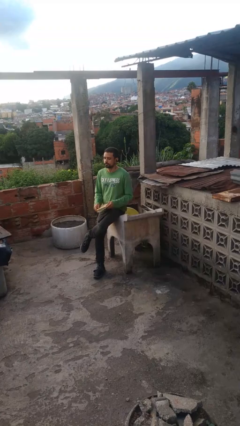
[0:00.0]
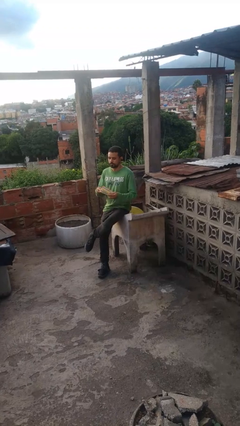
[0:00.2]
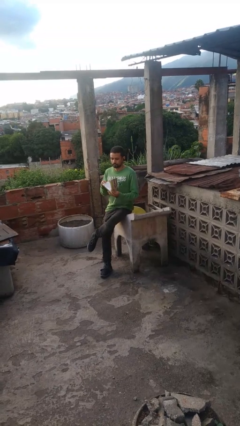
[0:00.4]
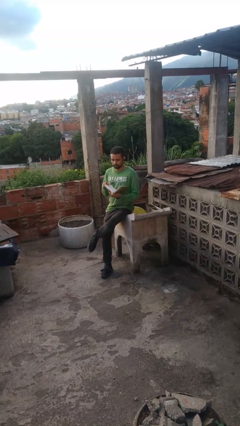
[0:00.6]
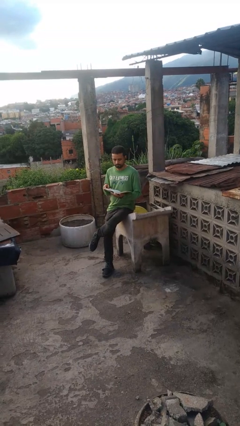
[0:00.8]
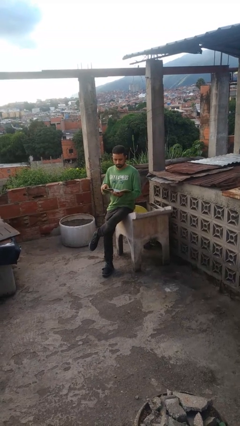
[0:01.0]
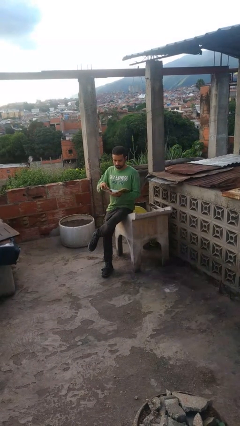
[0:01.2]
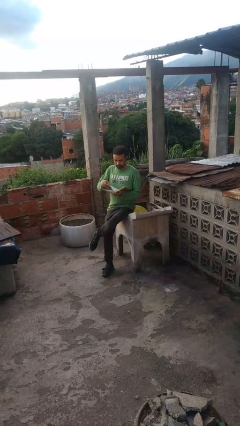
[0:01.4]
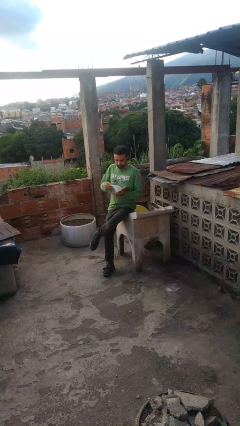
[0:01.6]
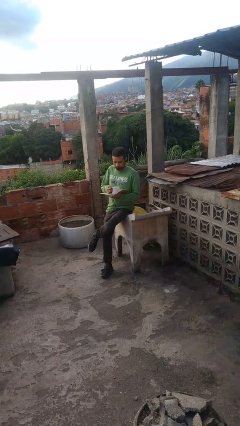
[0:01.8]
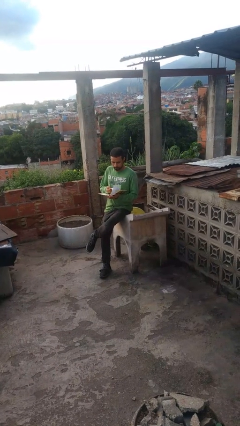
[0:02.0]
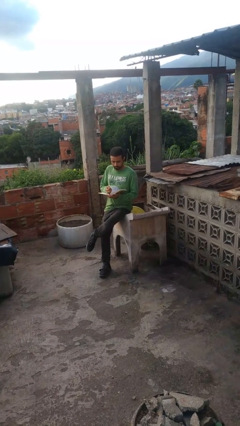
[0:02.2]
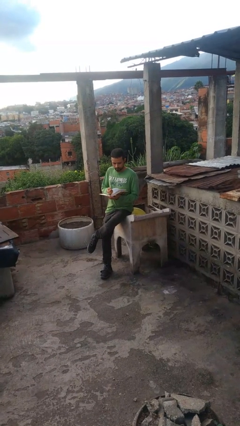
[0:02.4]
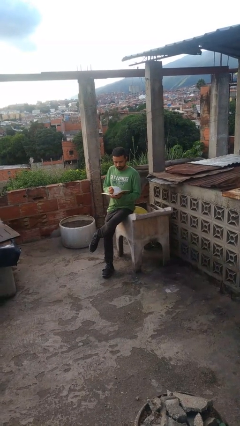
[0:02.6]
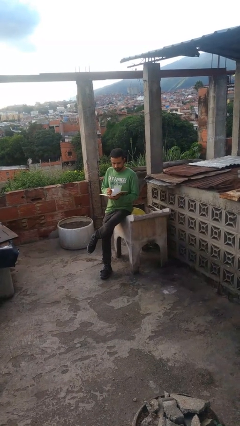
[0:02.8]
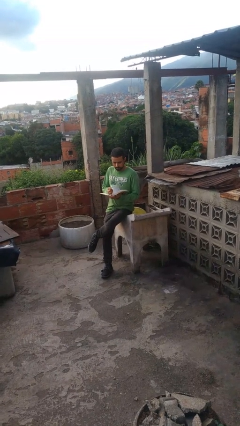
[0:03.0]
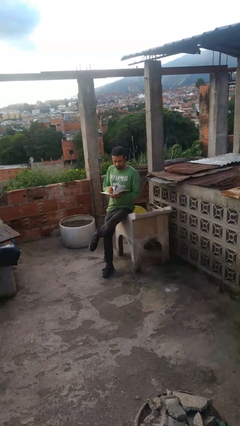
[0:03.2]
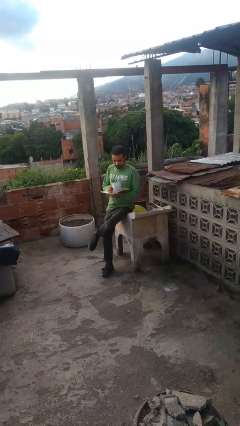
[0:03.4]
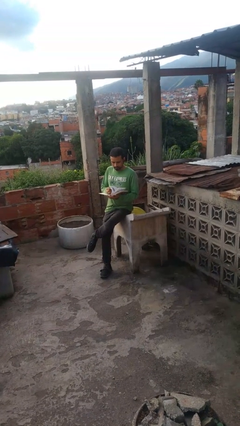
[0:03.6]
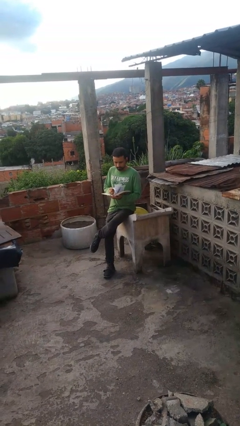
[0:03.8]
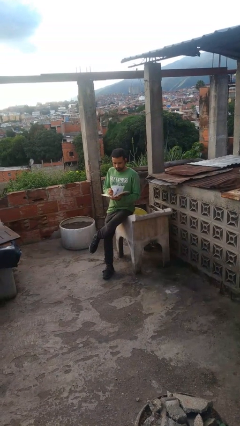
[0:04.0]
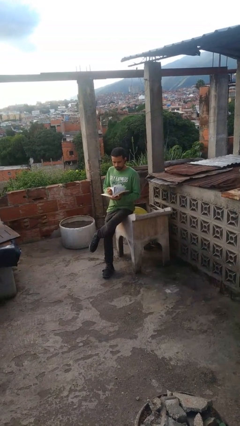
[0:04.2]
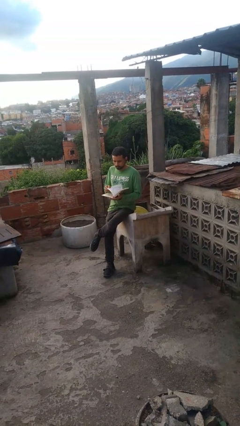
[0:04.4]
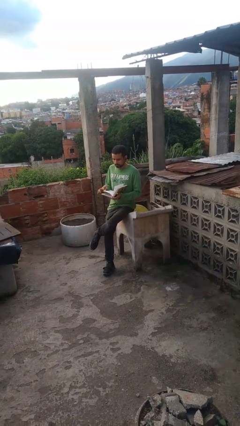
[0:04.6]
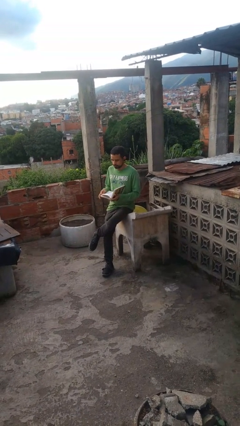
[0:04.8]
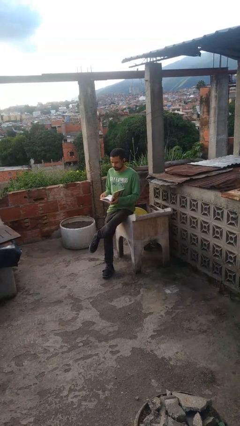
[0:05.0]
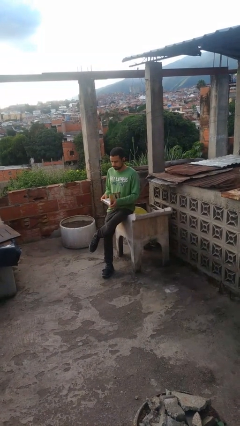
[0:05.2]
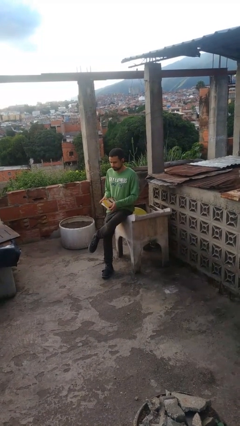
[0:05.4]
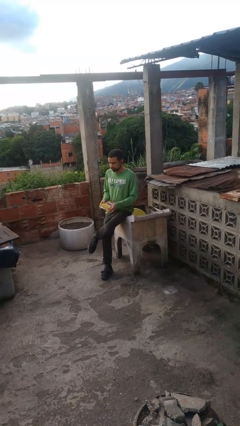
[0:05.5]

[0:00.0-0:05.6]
person reads book

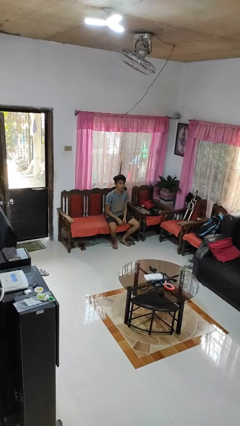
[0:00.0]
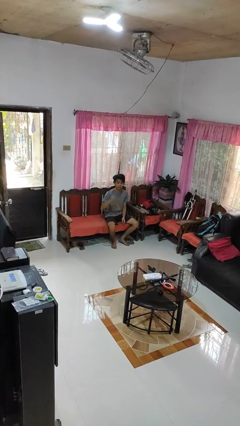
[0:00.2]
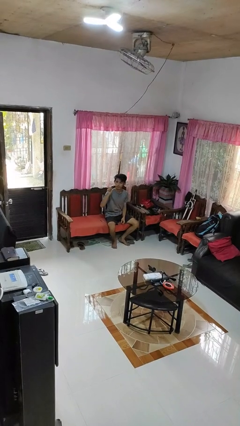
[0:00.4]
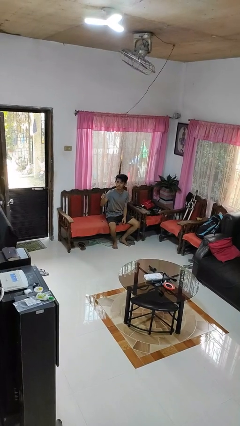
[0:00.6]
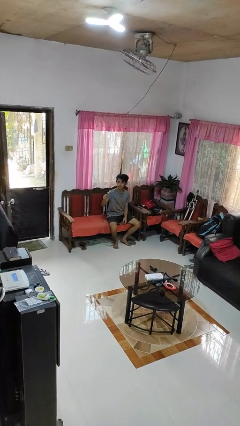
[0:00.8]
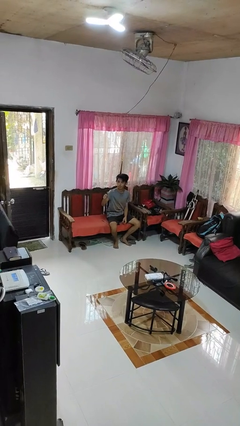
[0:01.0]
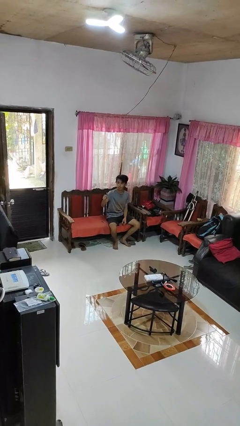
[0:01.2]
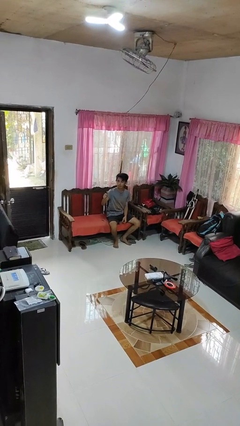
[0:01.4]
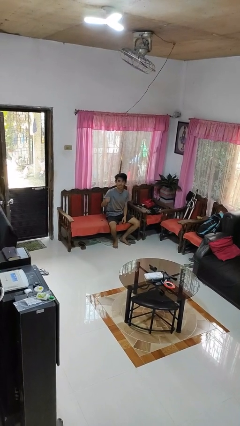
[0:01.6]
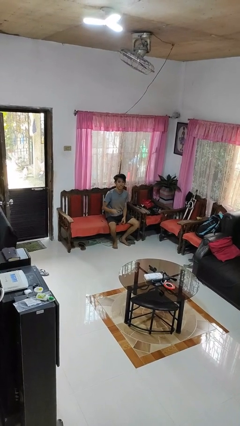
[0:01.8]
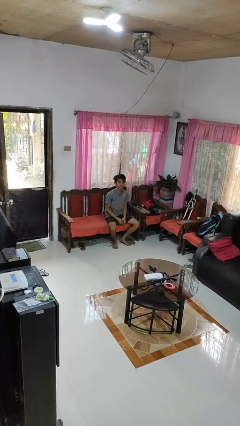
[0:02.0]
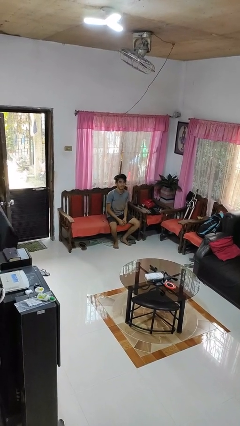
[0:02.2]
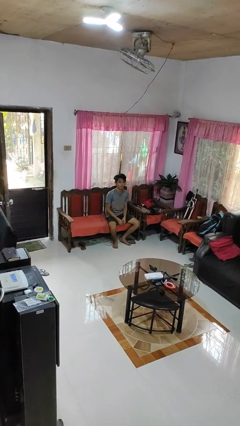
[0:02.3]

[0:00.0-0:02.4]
person gestures thumbs up

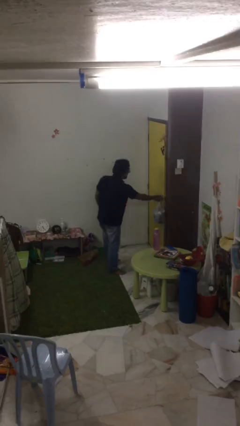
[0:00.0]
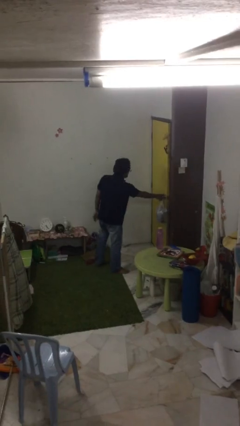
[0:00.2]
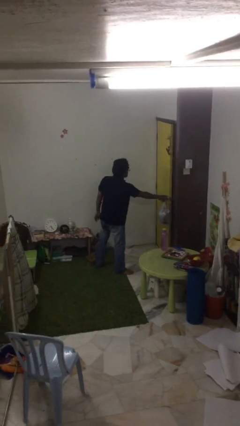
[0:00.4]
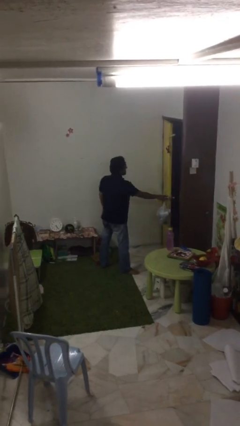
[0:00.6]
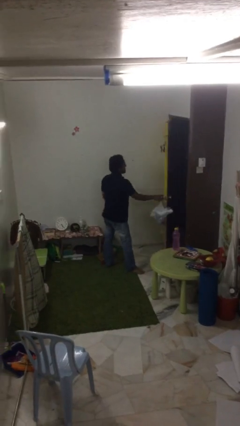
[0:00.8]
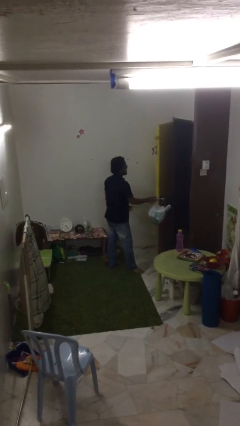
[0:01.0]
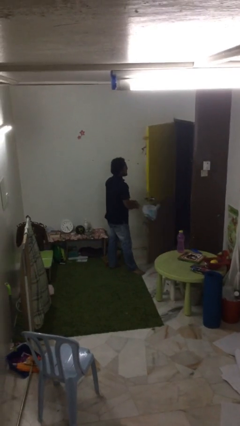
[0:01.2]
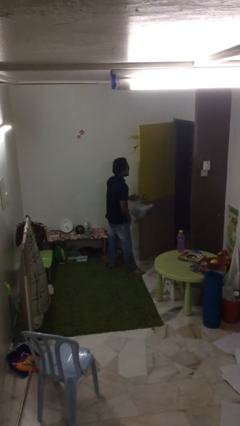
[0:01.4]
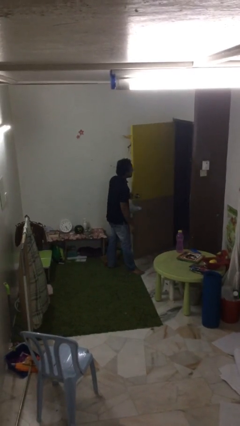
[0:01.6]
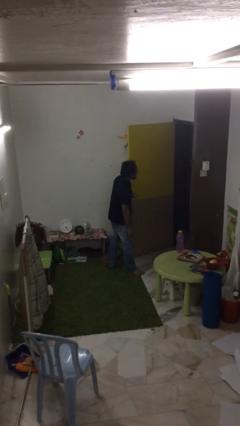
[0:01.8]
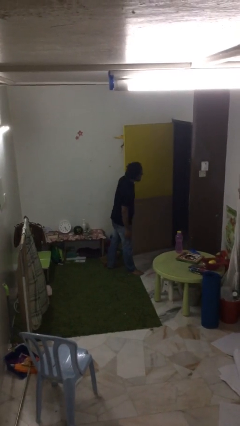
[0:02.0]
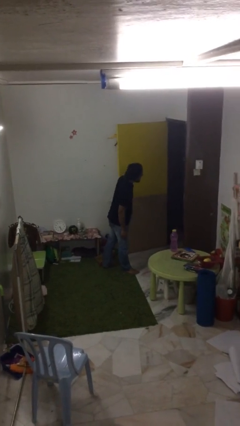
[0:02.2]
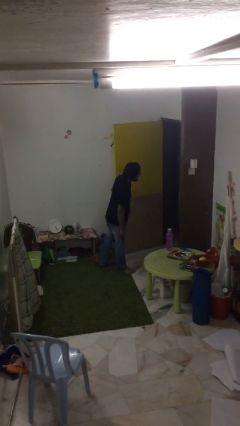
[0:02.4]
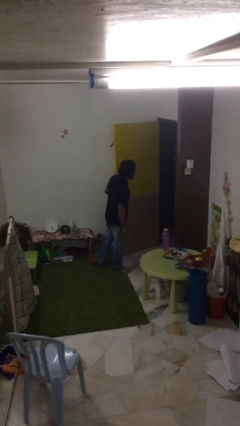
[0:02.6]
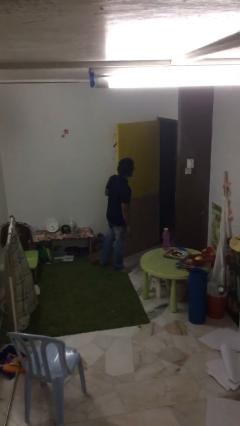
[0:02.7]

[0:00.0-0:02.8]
person opens facility door

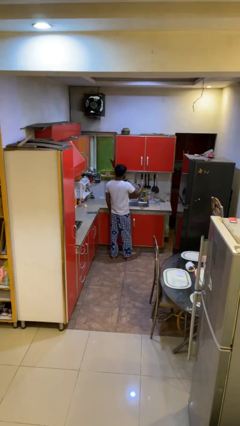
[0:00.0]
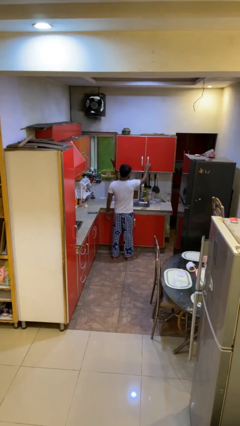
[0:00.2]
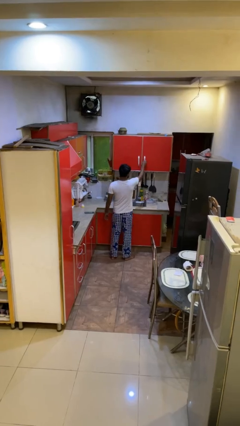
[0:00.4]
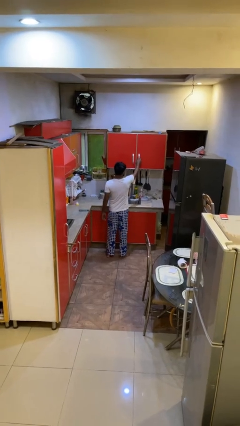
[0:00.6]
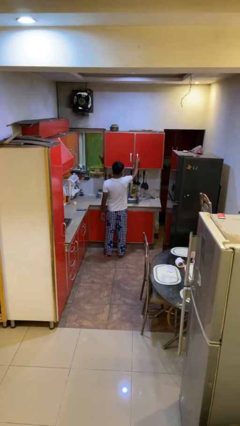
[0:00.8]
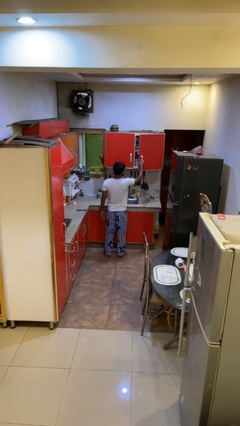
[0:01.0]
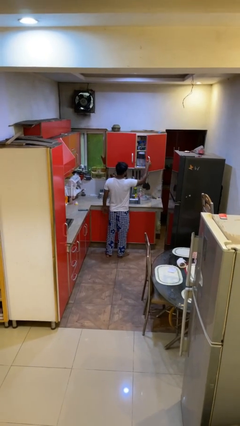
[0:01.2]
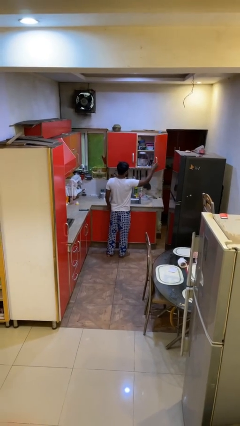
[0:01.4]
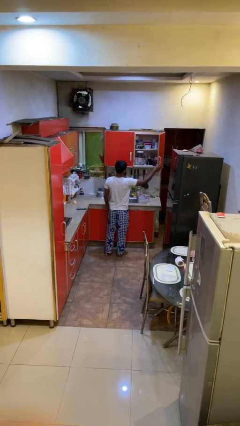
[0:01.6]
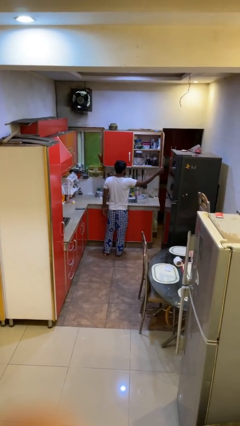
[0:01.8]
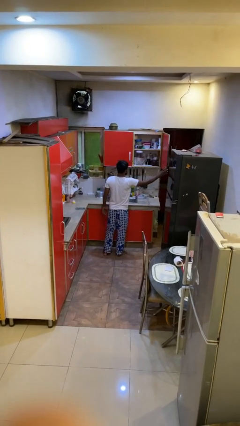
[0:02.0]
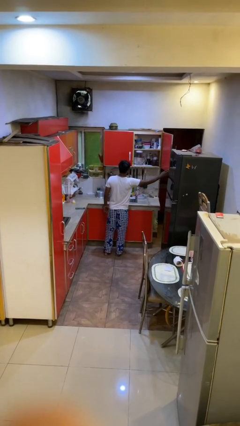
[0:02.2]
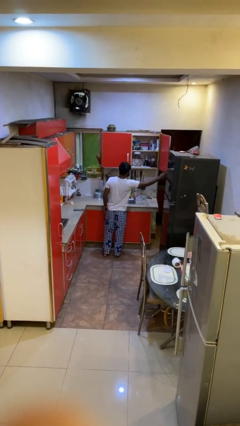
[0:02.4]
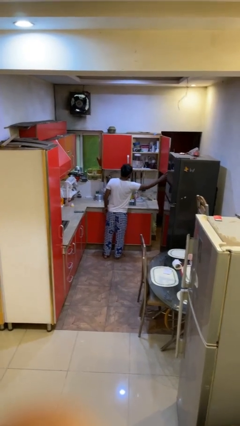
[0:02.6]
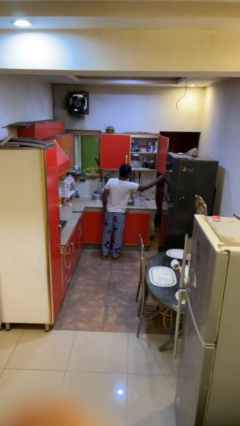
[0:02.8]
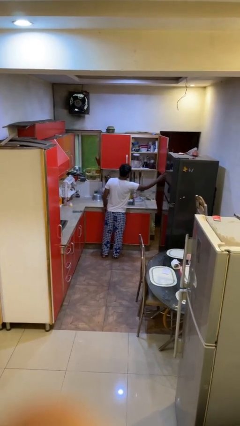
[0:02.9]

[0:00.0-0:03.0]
person opens cabinet

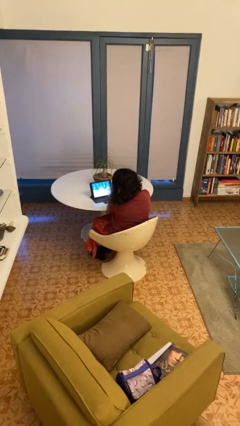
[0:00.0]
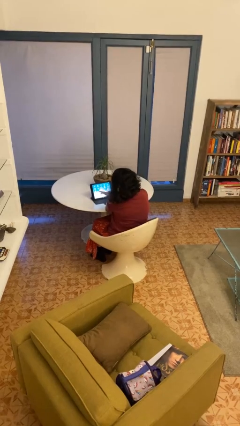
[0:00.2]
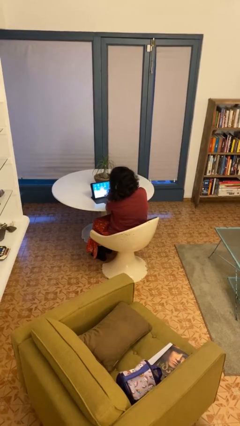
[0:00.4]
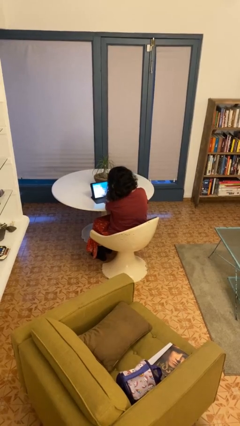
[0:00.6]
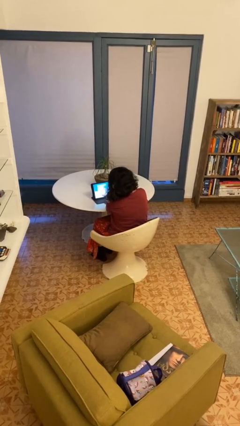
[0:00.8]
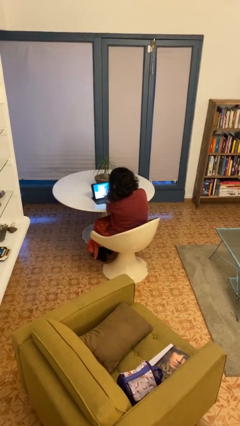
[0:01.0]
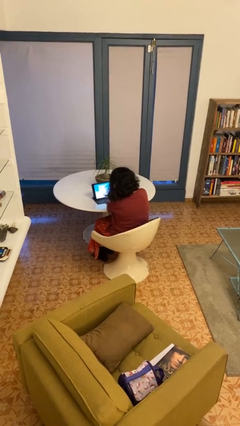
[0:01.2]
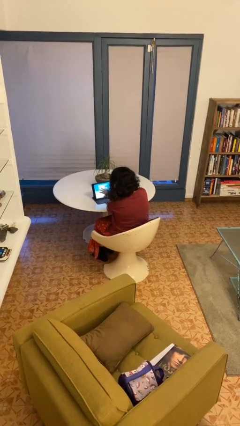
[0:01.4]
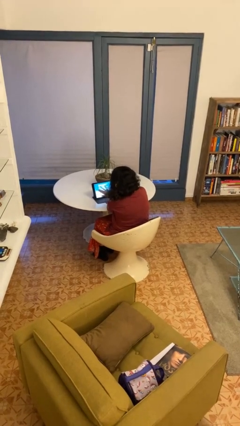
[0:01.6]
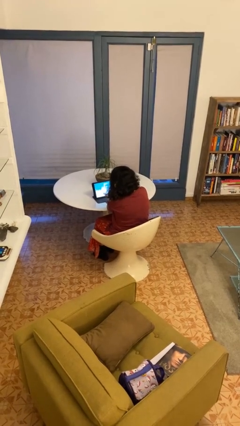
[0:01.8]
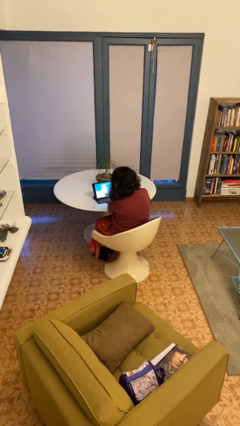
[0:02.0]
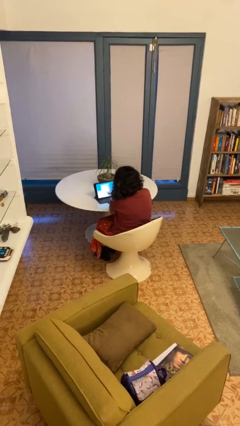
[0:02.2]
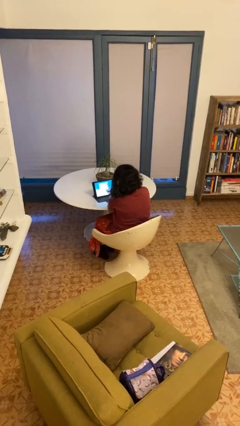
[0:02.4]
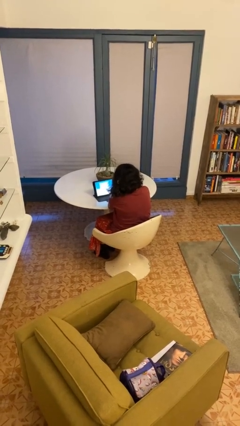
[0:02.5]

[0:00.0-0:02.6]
person interacts with tablet

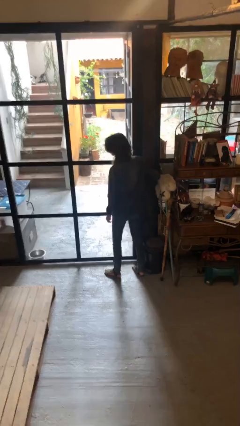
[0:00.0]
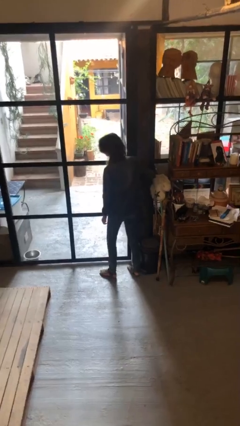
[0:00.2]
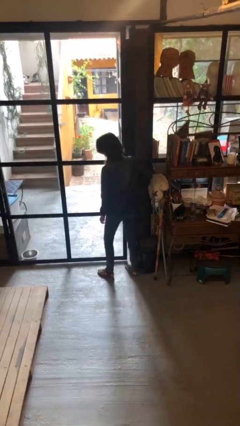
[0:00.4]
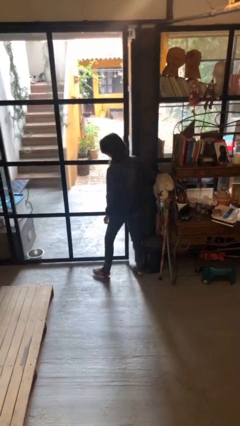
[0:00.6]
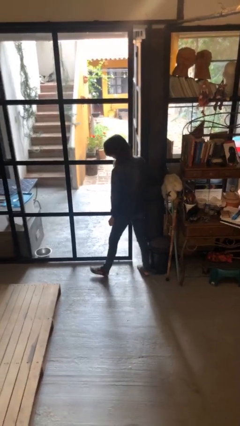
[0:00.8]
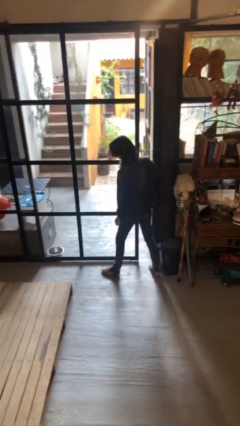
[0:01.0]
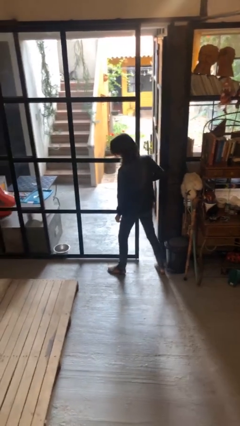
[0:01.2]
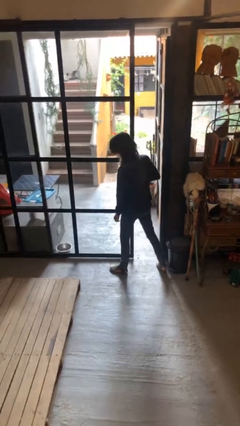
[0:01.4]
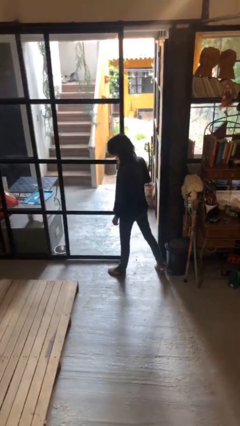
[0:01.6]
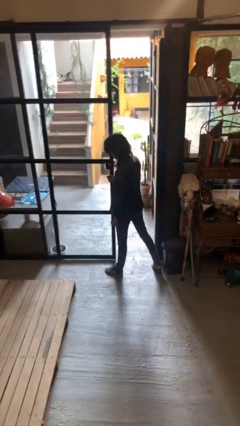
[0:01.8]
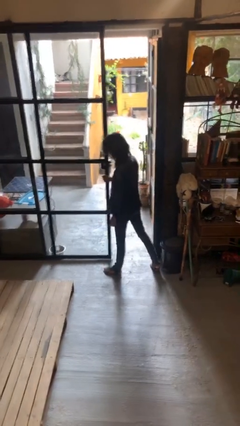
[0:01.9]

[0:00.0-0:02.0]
person opens sliding door
